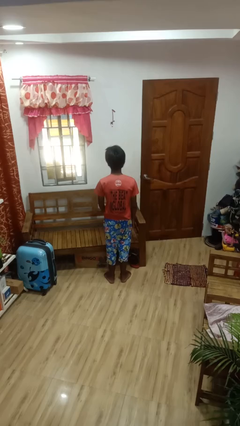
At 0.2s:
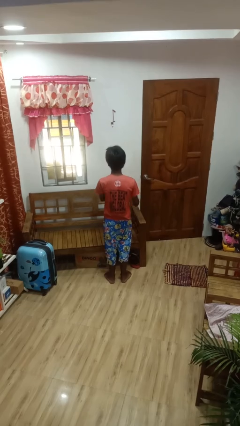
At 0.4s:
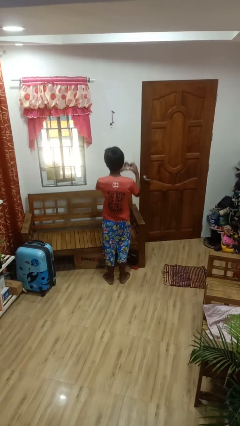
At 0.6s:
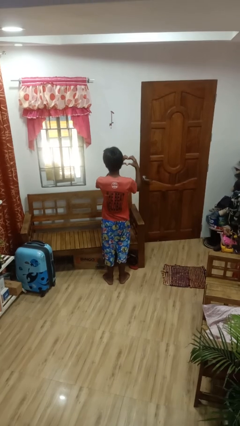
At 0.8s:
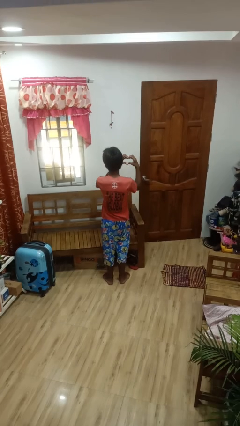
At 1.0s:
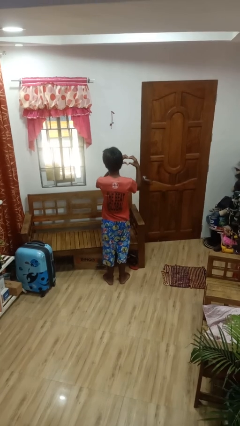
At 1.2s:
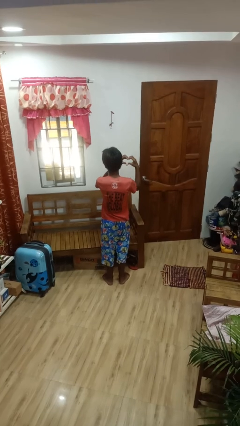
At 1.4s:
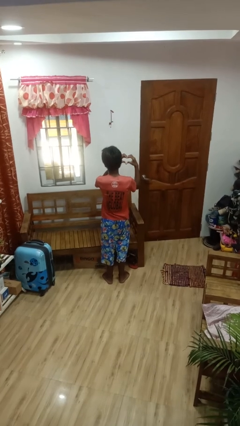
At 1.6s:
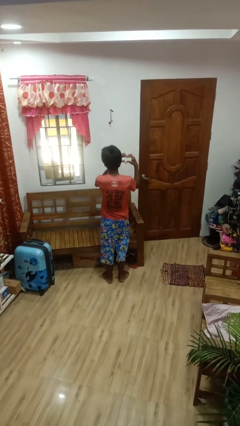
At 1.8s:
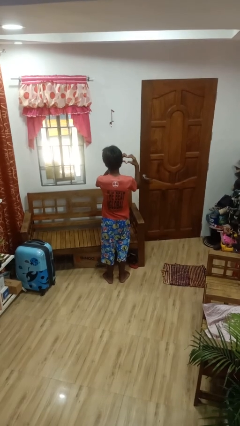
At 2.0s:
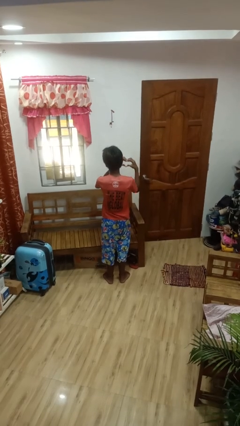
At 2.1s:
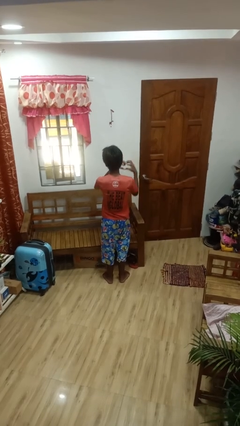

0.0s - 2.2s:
person gestures heart

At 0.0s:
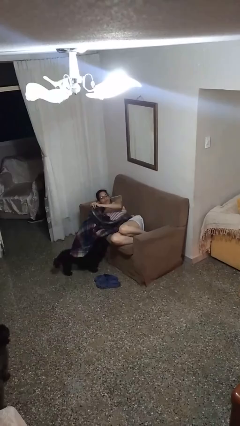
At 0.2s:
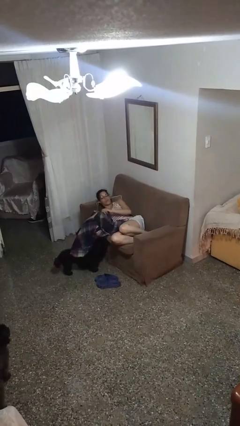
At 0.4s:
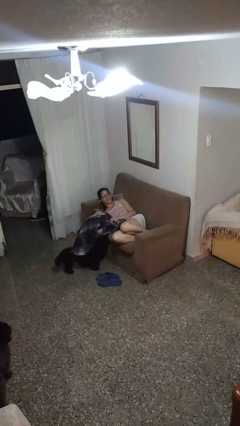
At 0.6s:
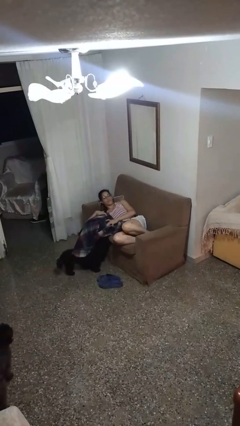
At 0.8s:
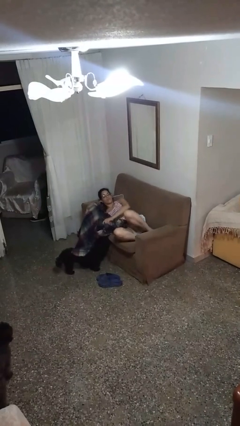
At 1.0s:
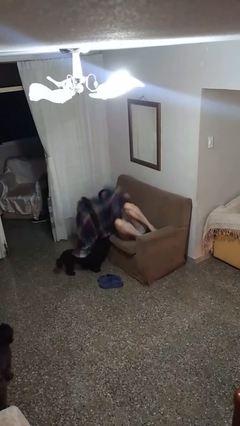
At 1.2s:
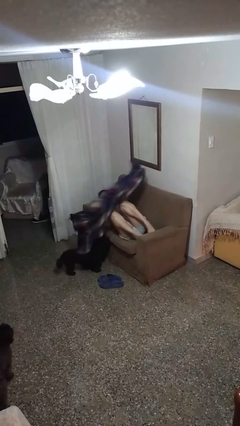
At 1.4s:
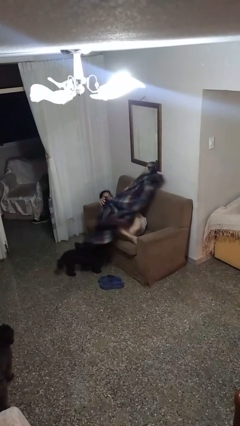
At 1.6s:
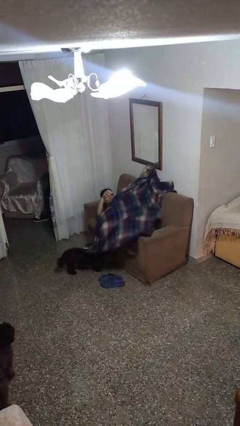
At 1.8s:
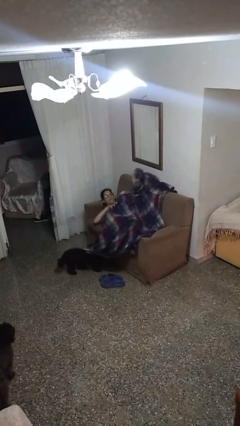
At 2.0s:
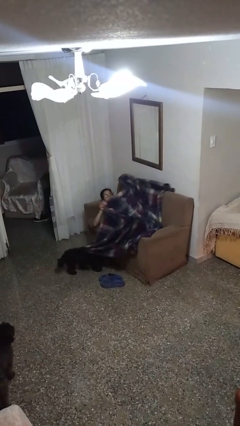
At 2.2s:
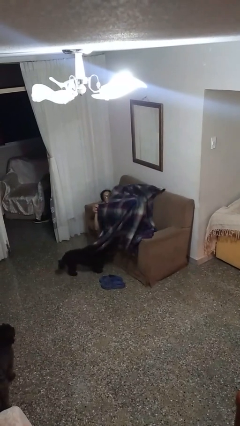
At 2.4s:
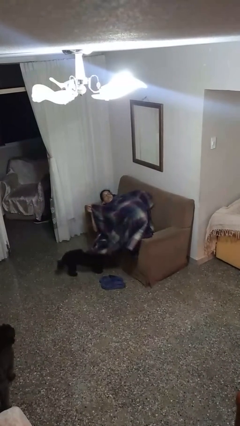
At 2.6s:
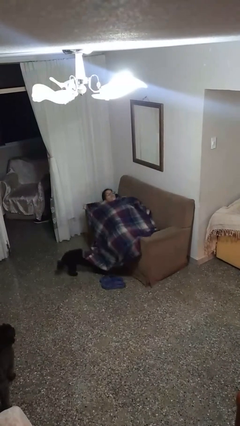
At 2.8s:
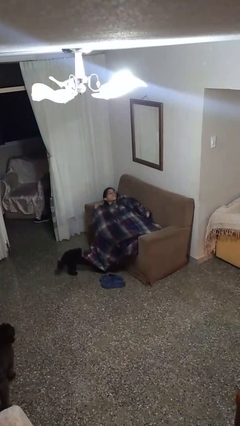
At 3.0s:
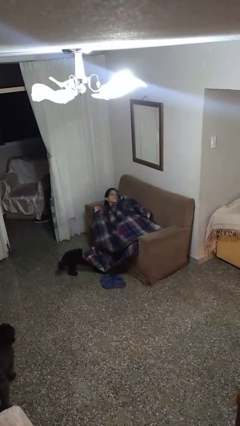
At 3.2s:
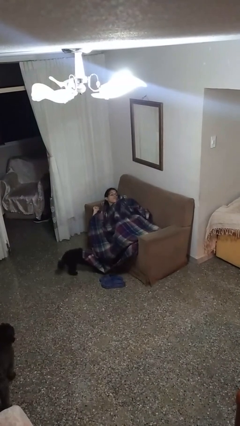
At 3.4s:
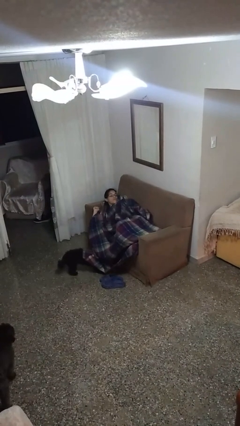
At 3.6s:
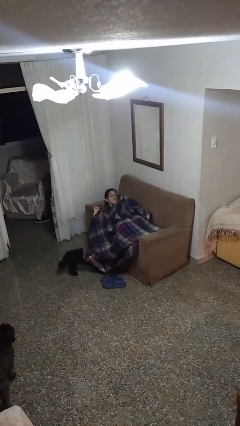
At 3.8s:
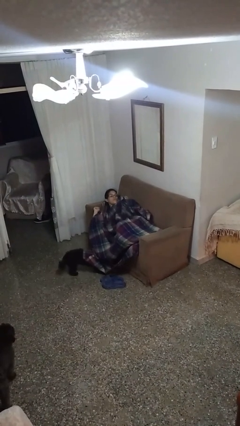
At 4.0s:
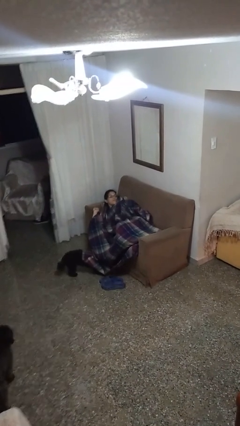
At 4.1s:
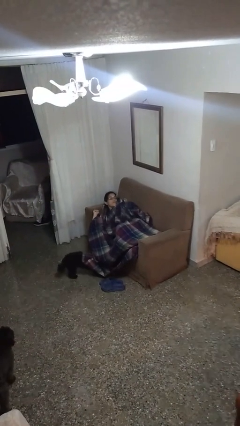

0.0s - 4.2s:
person covers with blanket

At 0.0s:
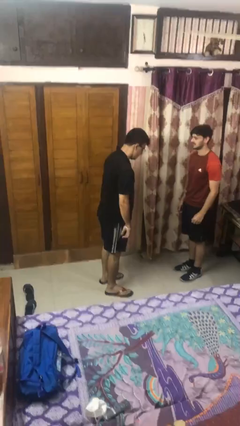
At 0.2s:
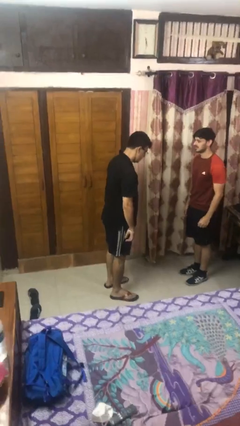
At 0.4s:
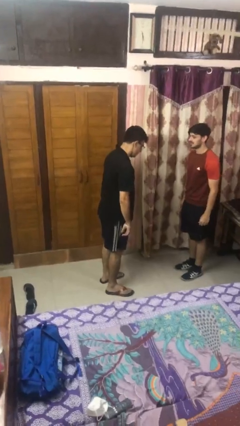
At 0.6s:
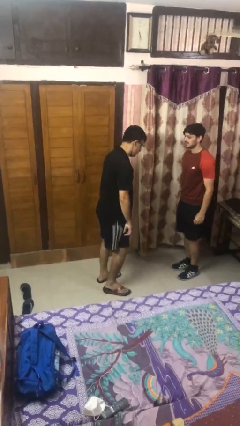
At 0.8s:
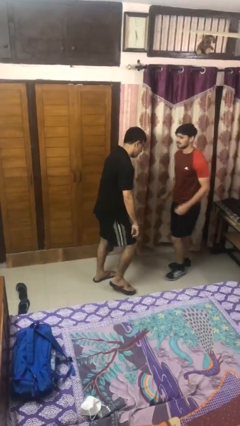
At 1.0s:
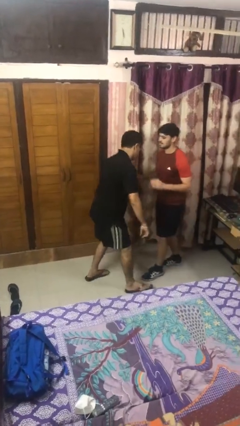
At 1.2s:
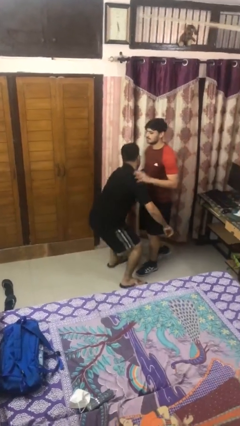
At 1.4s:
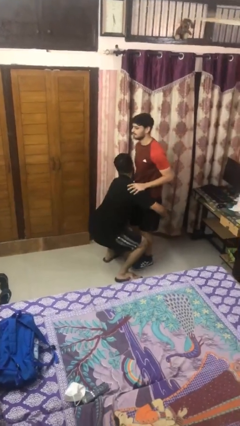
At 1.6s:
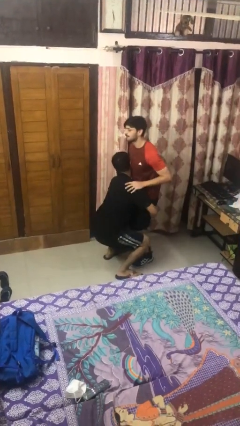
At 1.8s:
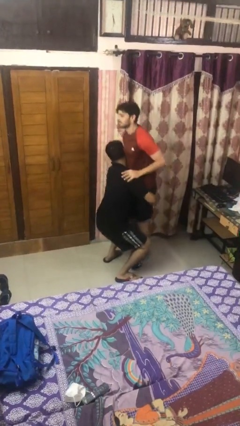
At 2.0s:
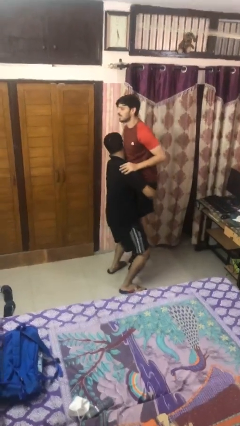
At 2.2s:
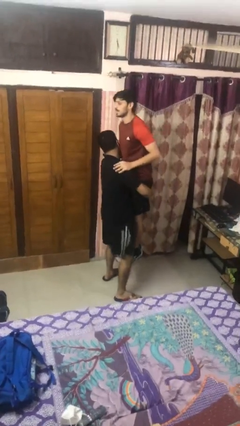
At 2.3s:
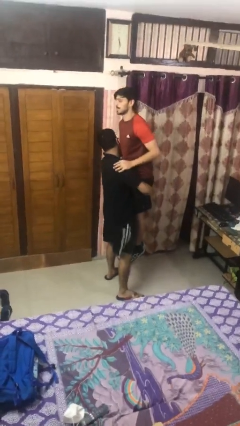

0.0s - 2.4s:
person picks up person

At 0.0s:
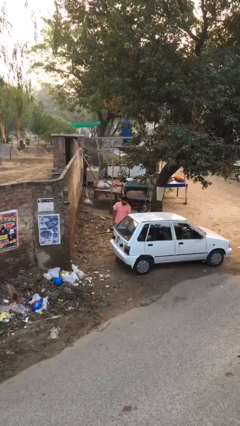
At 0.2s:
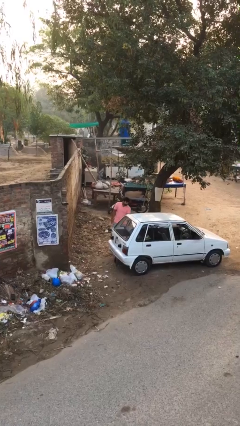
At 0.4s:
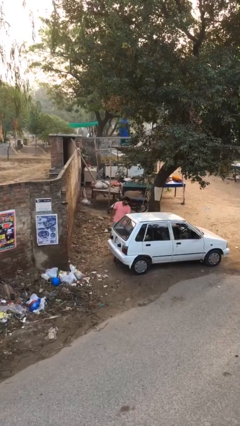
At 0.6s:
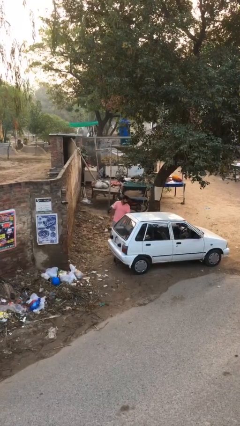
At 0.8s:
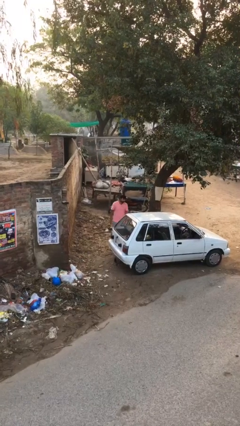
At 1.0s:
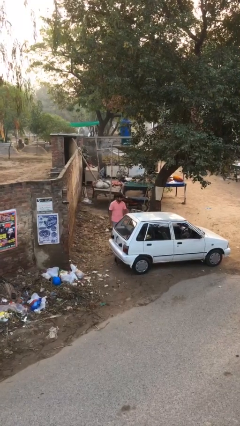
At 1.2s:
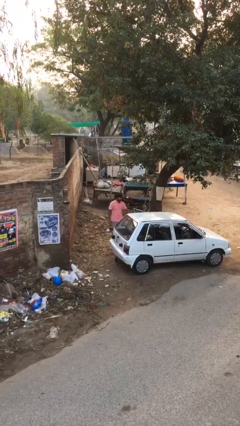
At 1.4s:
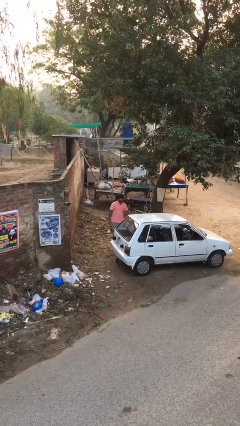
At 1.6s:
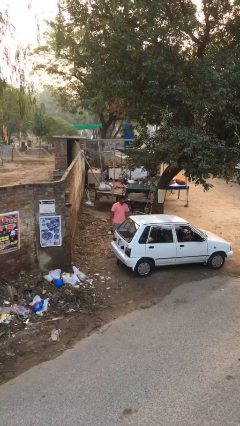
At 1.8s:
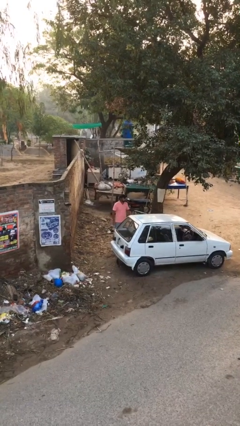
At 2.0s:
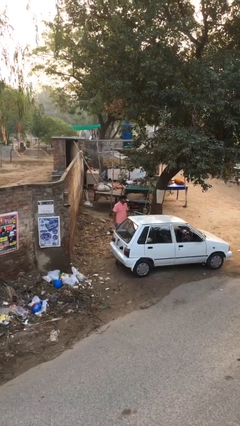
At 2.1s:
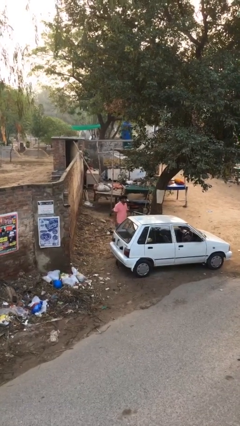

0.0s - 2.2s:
person opens car door

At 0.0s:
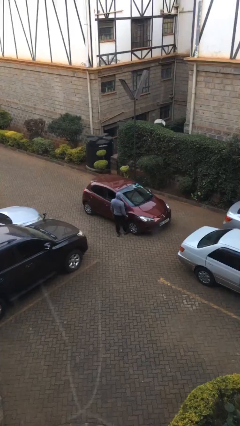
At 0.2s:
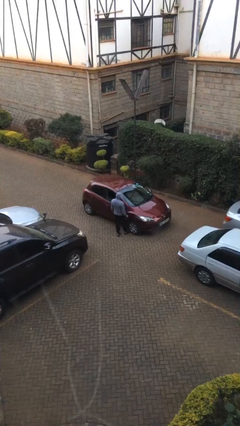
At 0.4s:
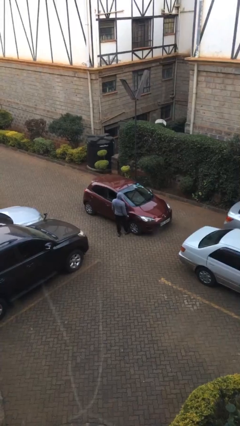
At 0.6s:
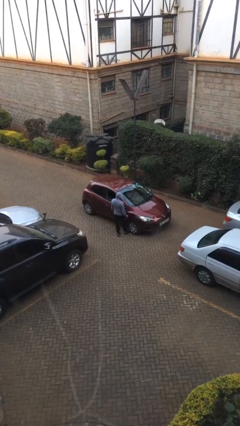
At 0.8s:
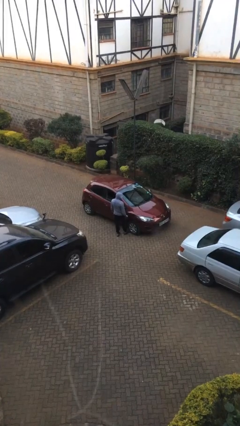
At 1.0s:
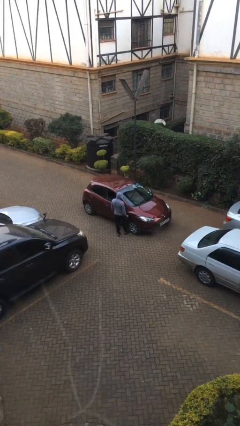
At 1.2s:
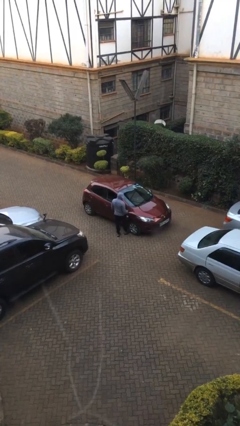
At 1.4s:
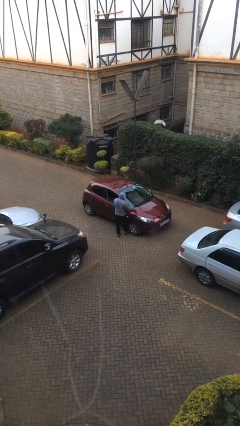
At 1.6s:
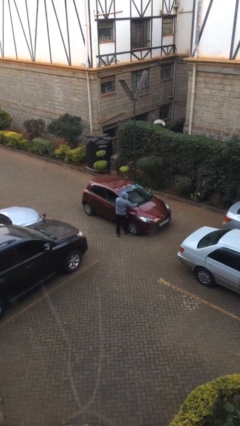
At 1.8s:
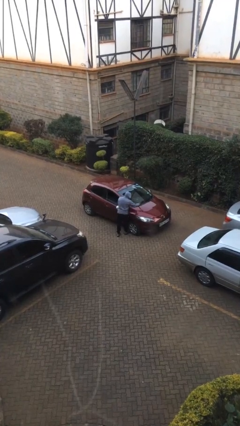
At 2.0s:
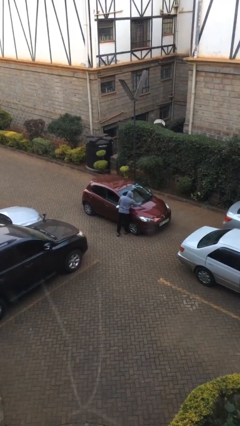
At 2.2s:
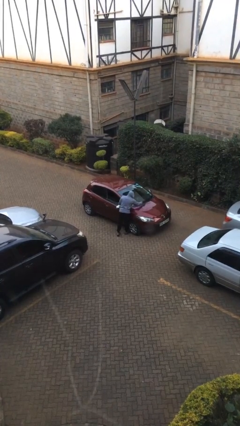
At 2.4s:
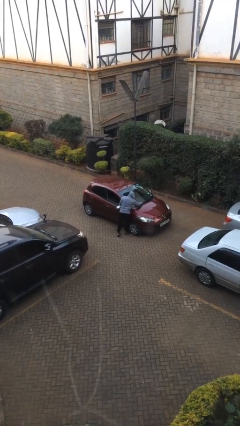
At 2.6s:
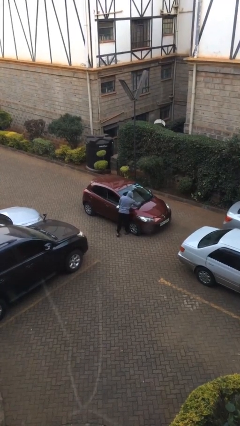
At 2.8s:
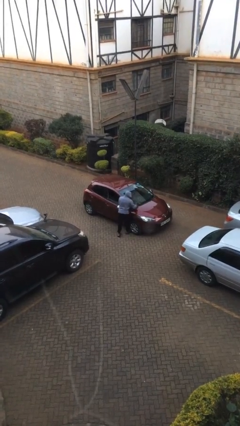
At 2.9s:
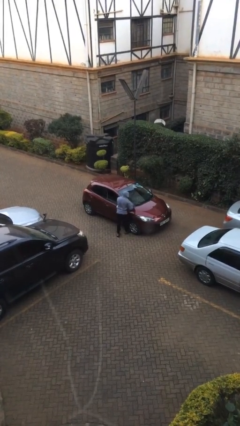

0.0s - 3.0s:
person flips down car wipers

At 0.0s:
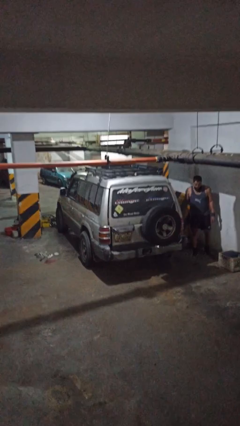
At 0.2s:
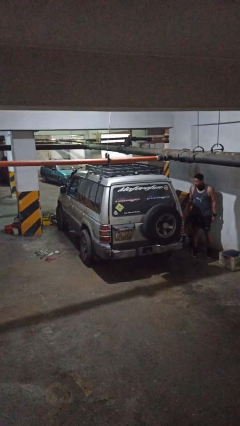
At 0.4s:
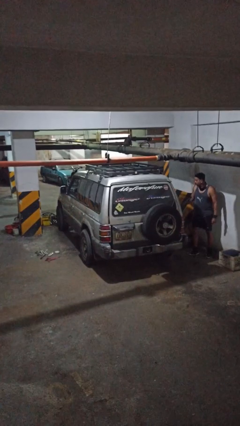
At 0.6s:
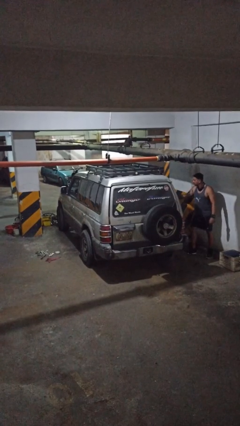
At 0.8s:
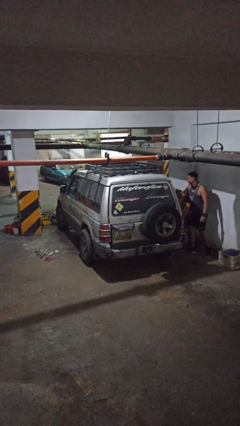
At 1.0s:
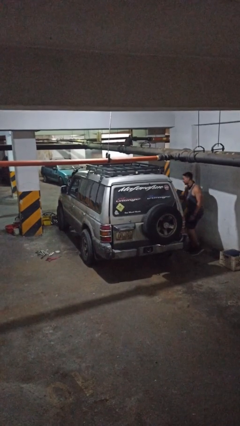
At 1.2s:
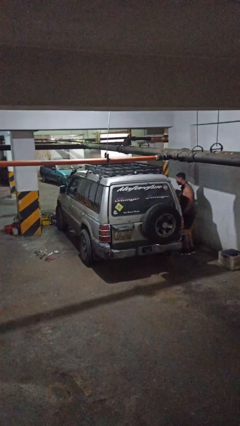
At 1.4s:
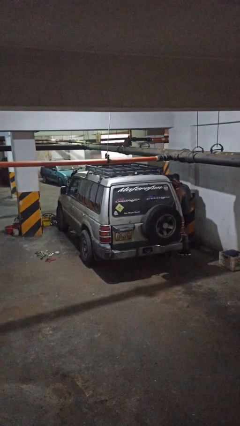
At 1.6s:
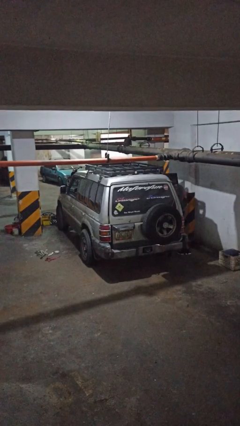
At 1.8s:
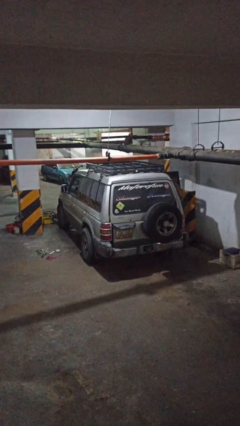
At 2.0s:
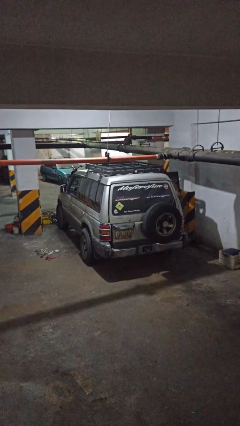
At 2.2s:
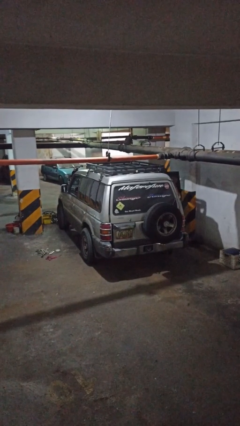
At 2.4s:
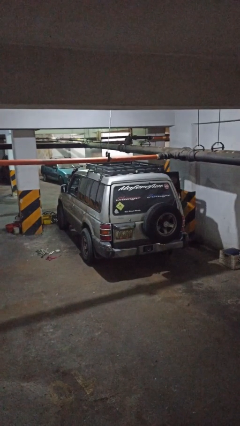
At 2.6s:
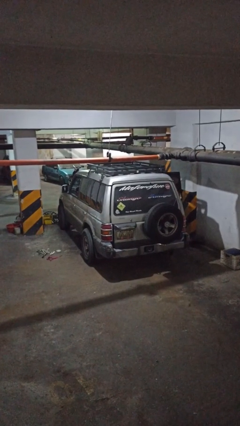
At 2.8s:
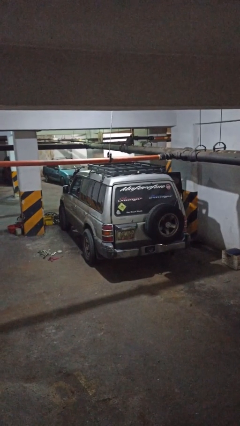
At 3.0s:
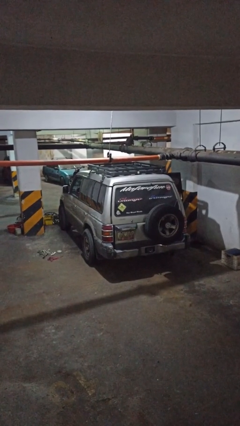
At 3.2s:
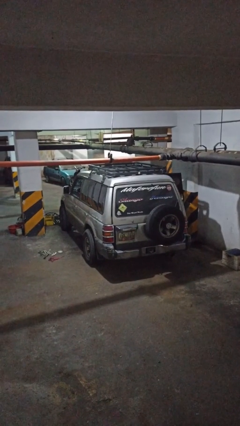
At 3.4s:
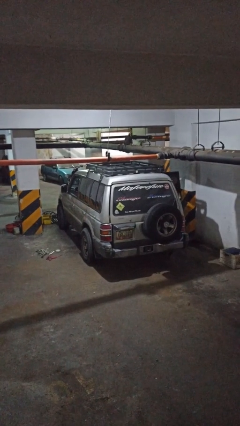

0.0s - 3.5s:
car picks up person

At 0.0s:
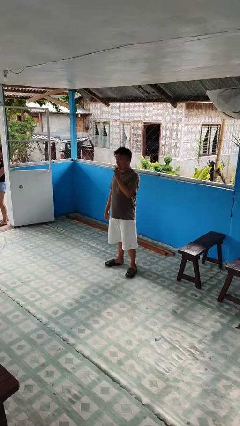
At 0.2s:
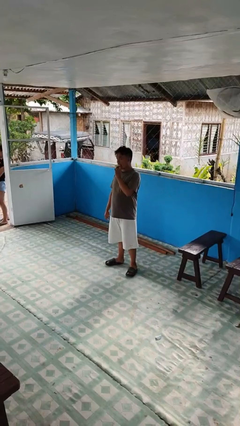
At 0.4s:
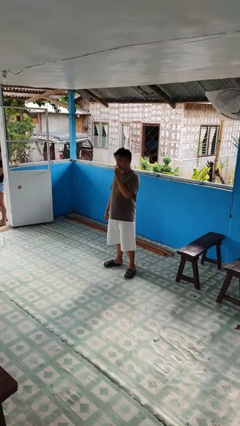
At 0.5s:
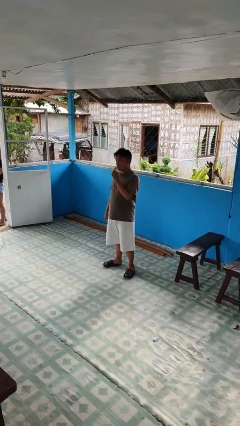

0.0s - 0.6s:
person eats banana
